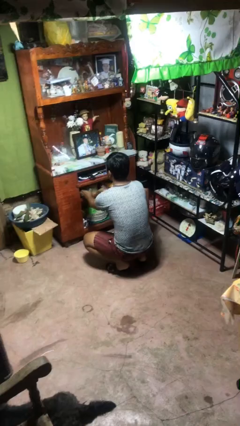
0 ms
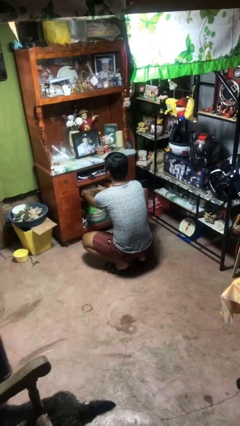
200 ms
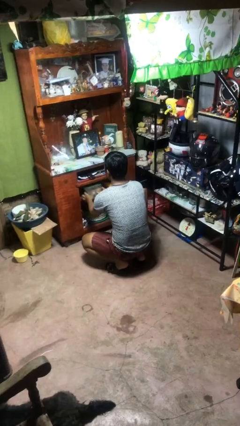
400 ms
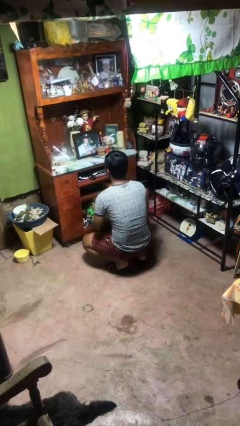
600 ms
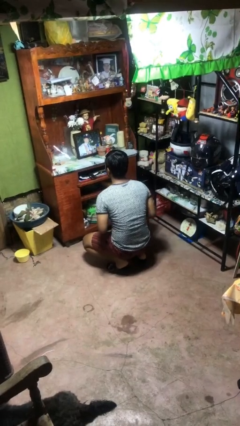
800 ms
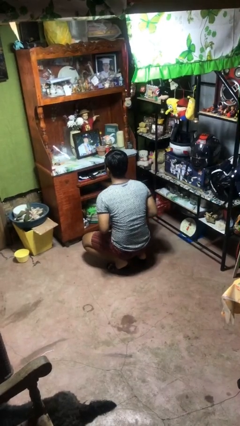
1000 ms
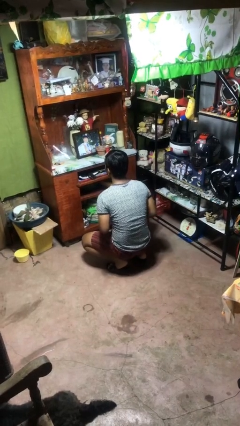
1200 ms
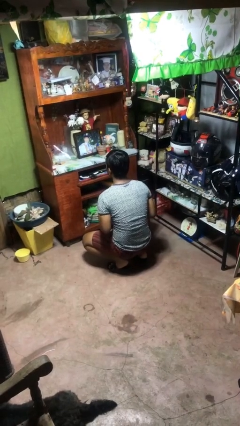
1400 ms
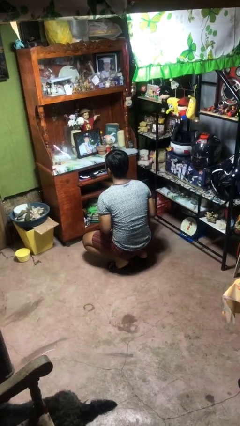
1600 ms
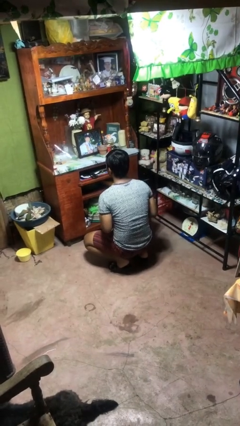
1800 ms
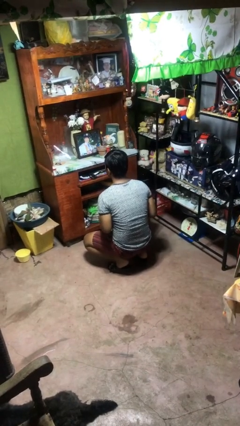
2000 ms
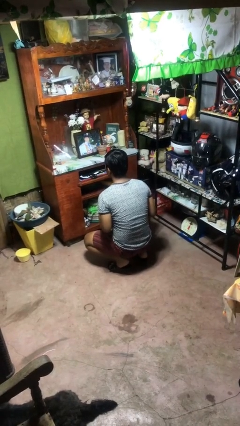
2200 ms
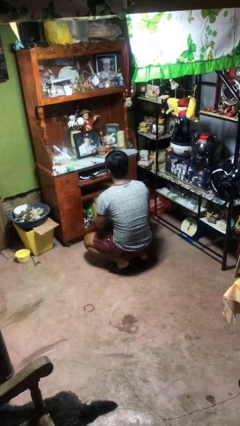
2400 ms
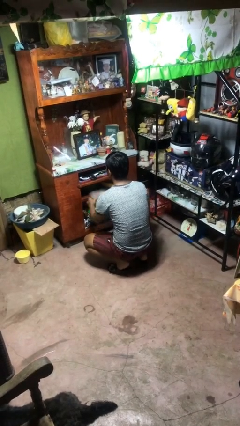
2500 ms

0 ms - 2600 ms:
person picks up object from cabinet

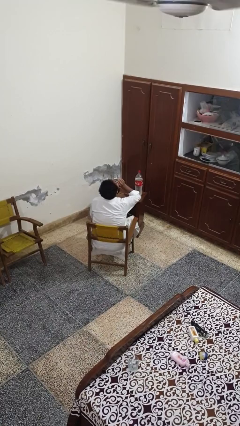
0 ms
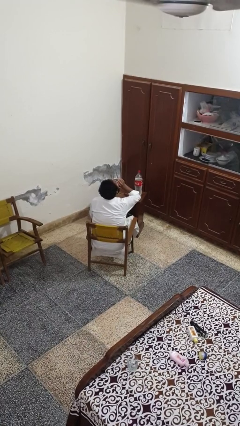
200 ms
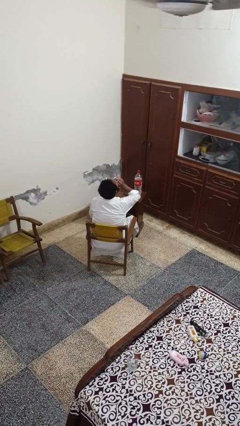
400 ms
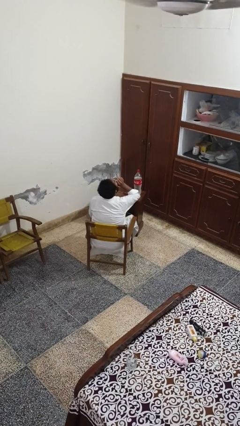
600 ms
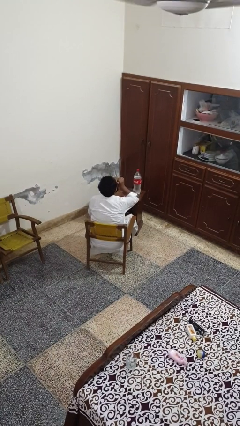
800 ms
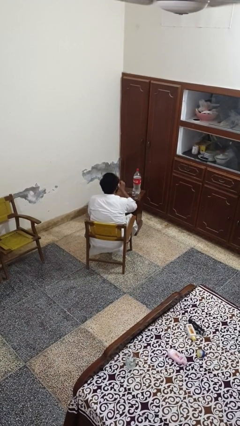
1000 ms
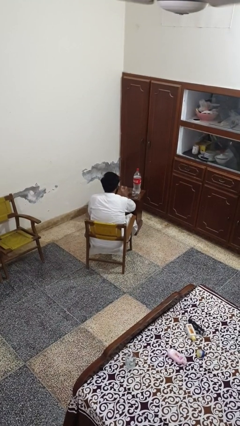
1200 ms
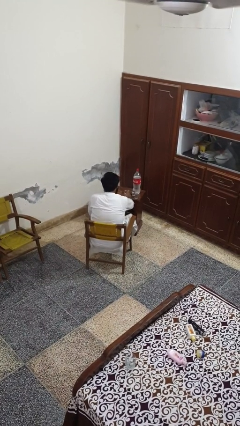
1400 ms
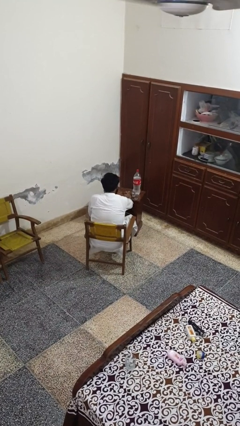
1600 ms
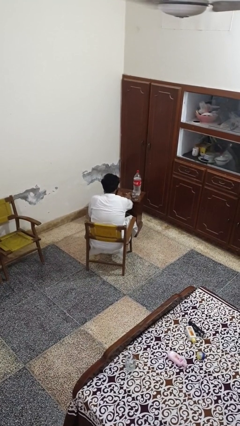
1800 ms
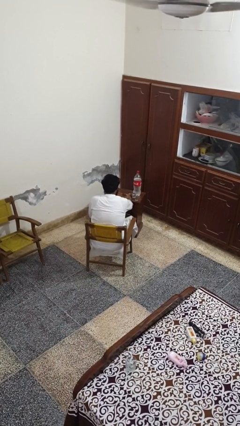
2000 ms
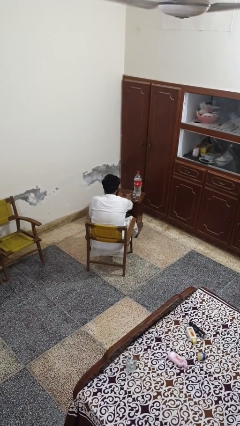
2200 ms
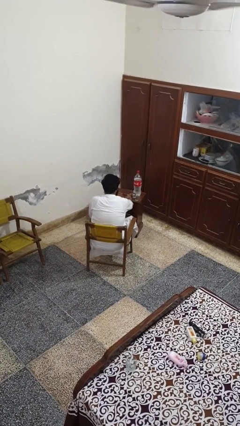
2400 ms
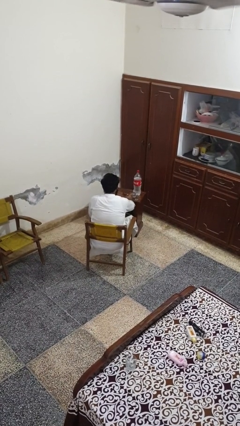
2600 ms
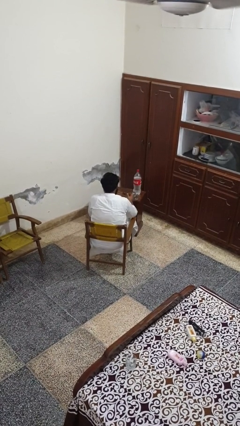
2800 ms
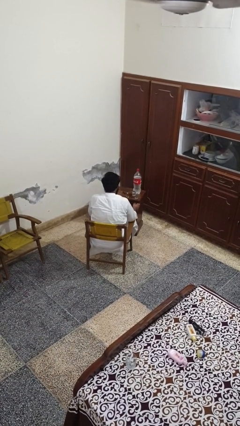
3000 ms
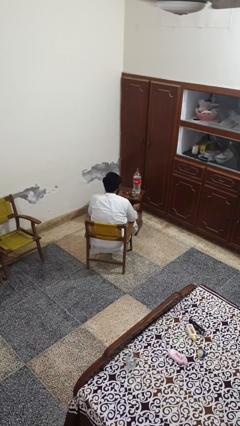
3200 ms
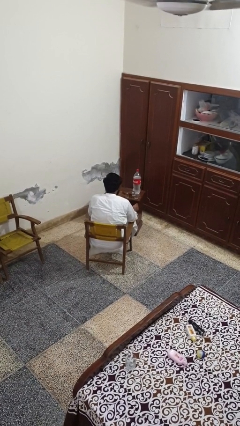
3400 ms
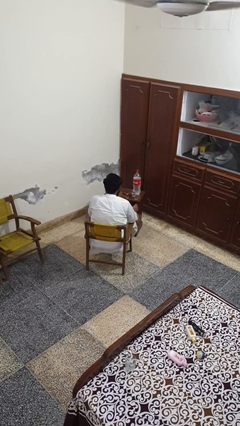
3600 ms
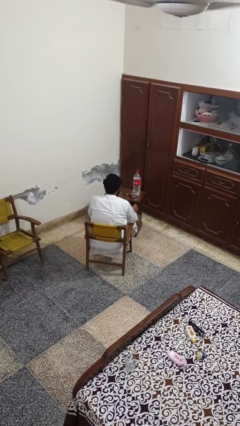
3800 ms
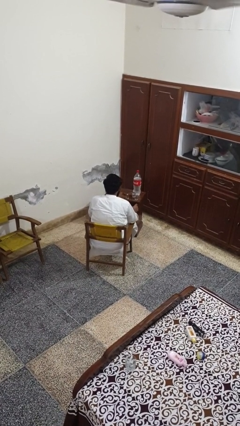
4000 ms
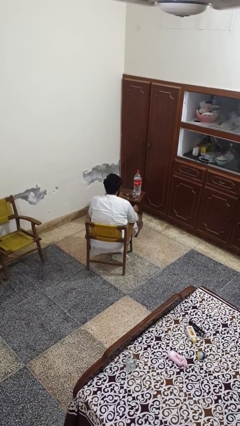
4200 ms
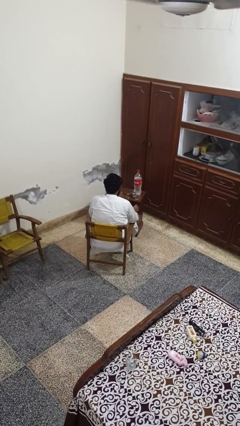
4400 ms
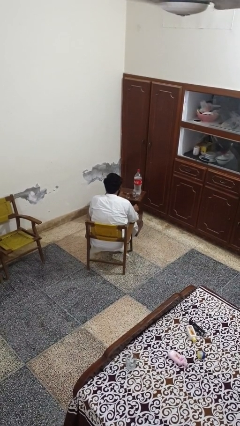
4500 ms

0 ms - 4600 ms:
person puts down object on table

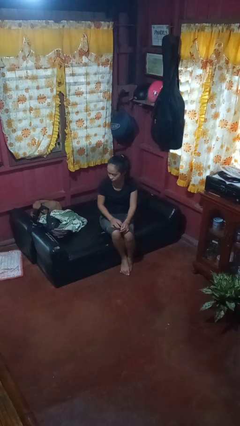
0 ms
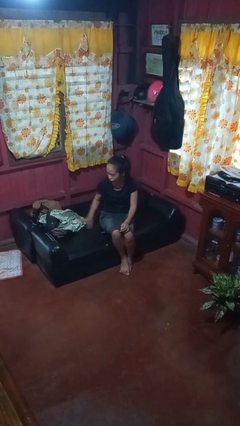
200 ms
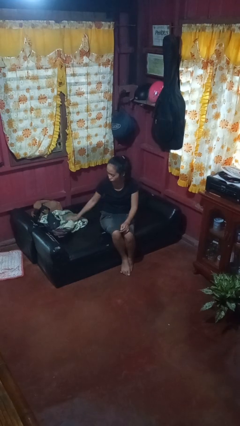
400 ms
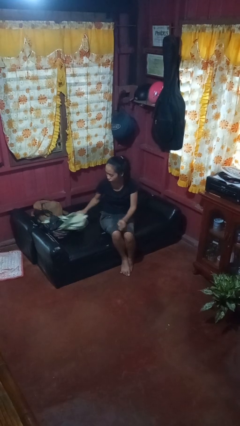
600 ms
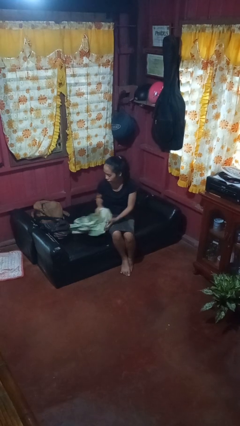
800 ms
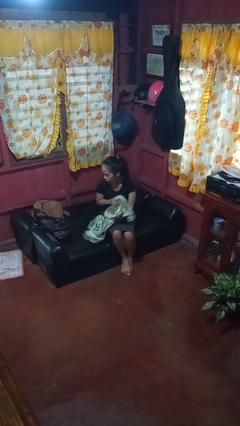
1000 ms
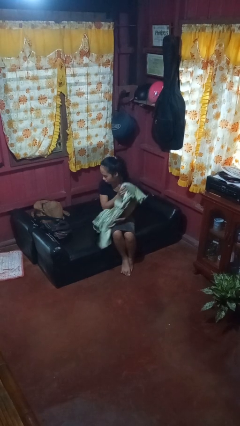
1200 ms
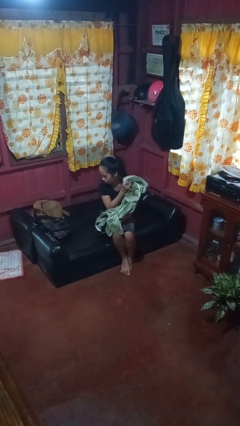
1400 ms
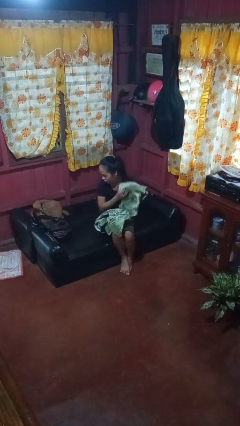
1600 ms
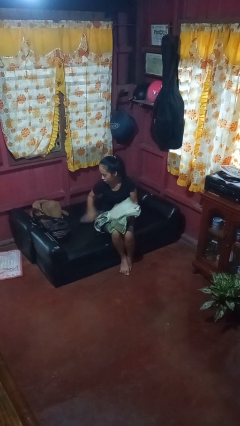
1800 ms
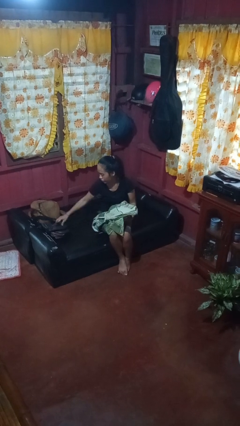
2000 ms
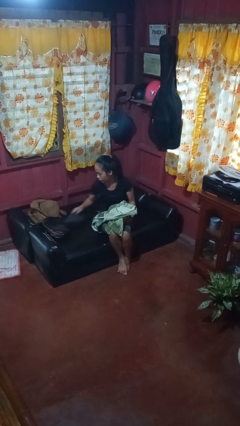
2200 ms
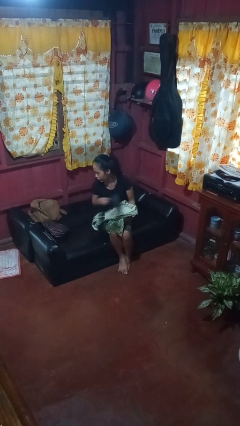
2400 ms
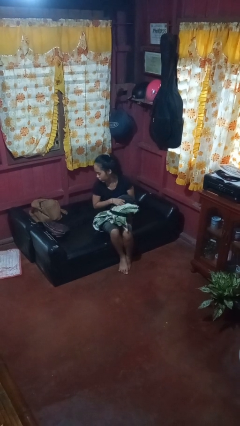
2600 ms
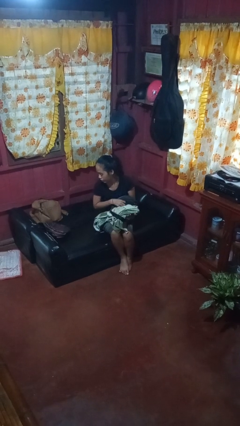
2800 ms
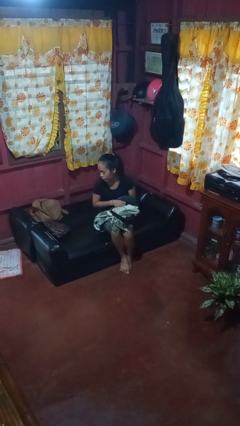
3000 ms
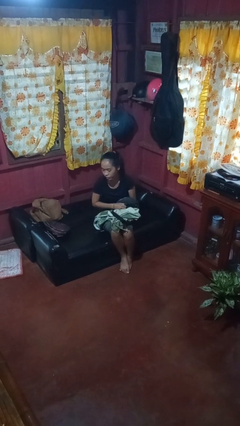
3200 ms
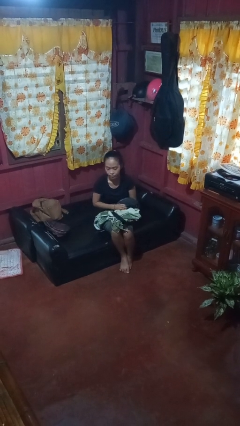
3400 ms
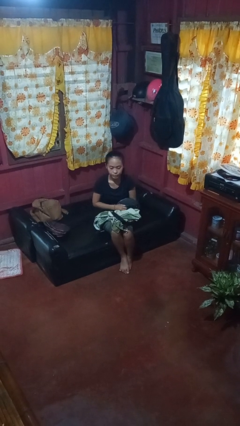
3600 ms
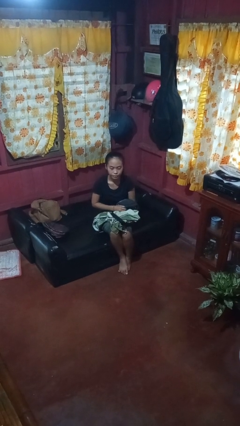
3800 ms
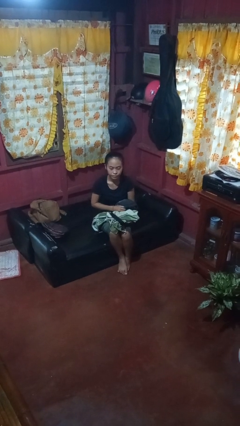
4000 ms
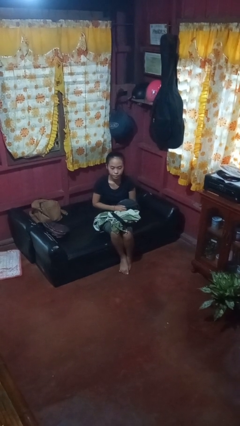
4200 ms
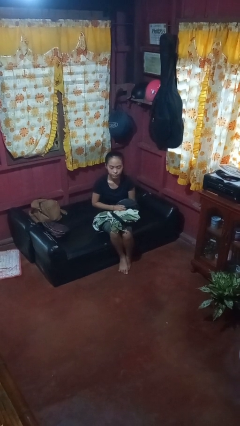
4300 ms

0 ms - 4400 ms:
person searches in couch

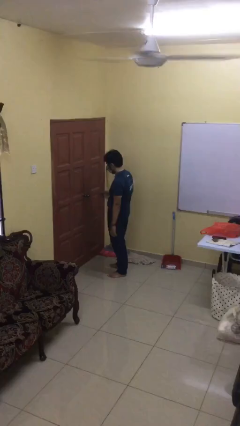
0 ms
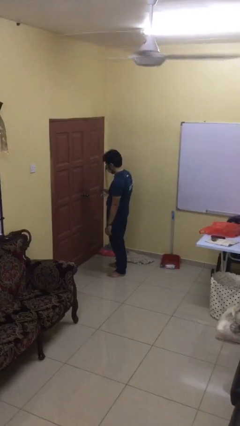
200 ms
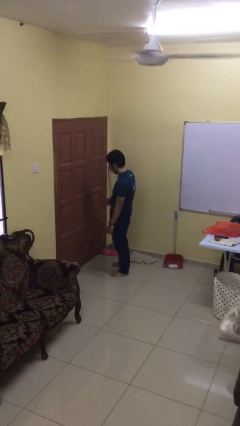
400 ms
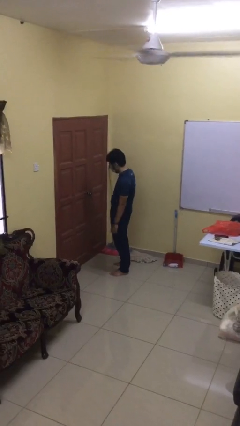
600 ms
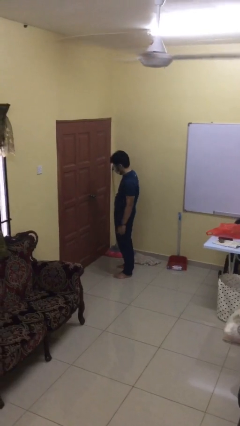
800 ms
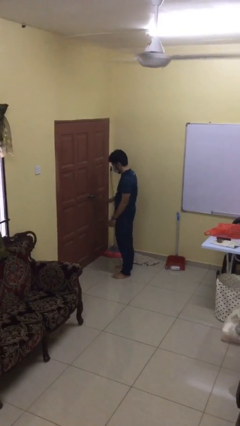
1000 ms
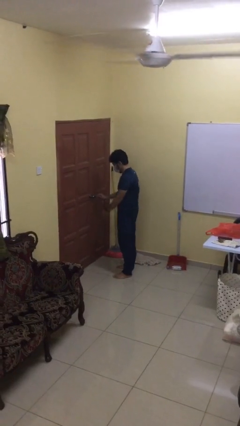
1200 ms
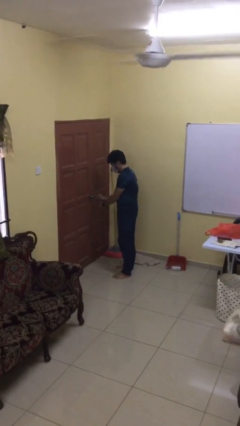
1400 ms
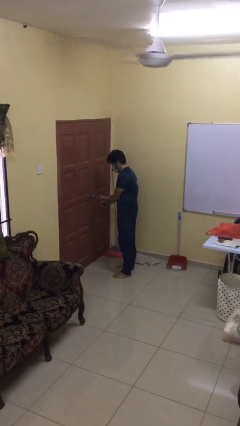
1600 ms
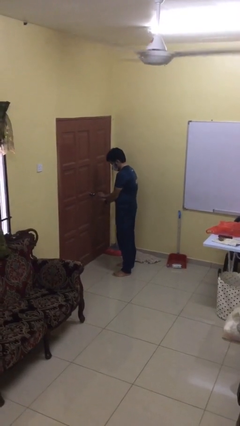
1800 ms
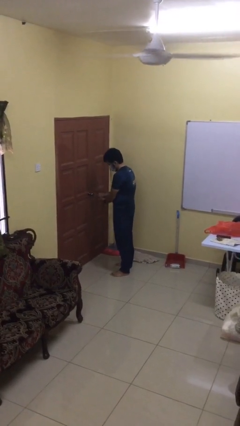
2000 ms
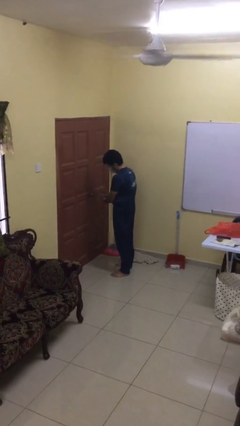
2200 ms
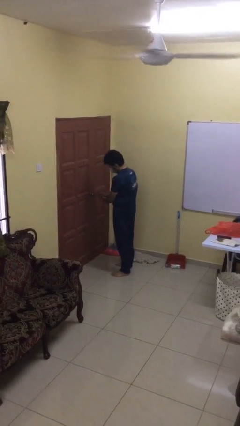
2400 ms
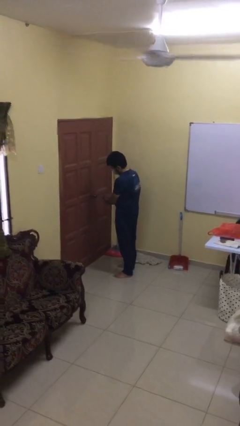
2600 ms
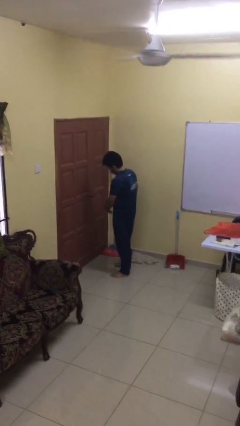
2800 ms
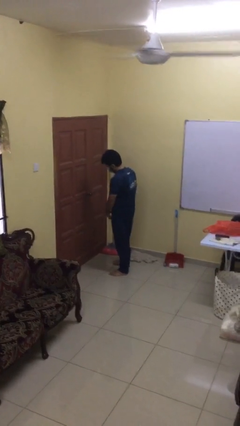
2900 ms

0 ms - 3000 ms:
person unlocks door with keys

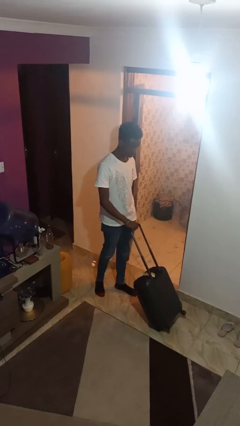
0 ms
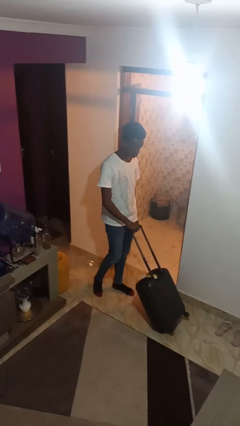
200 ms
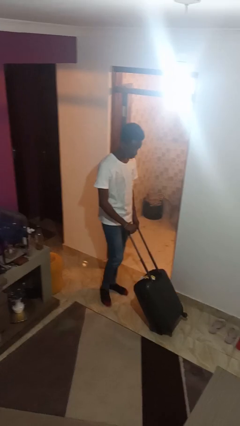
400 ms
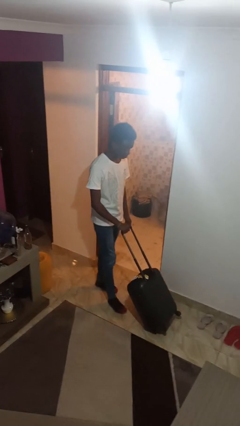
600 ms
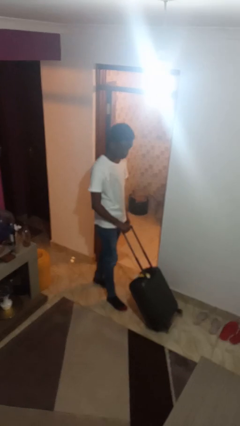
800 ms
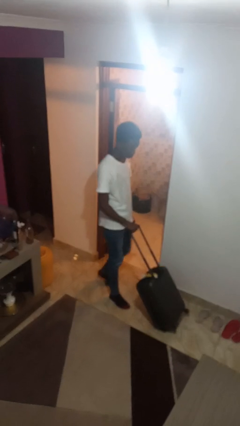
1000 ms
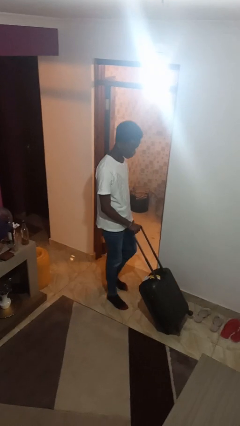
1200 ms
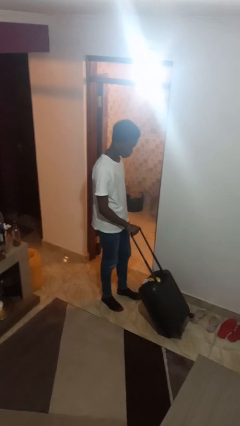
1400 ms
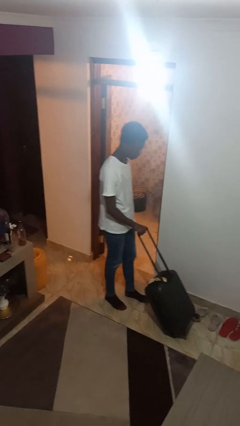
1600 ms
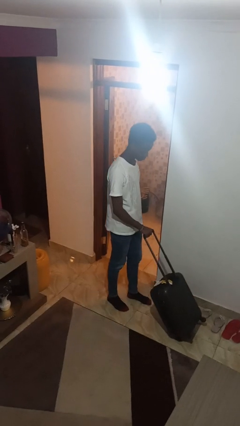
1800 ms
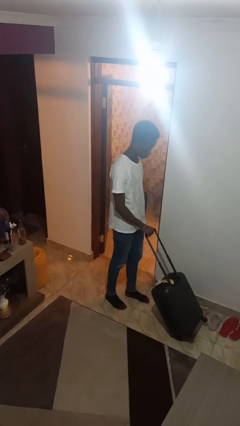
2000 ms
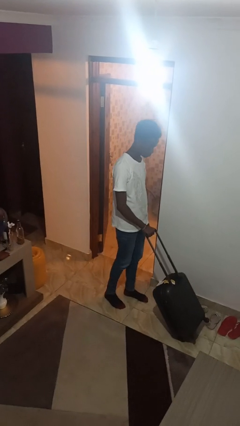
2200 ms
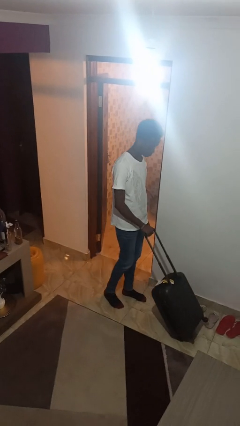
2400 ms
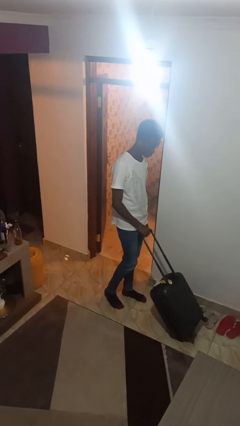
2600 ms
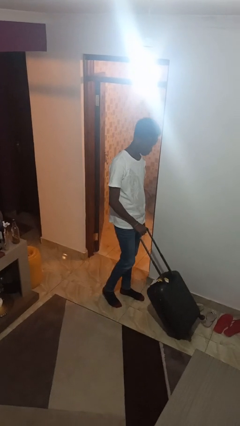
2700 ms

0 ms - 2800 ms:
person pushes wheeled cart
